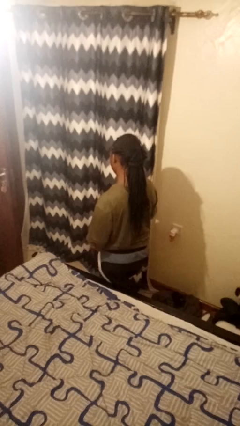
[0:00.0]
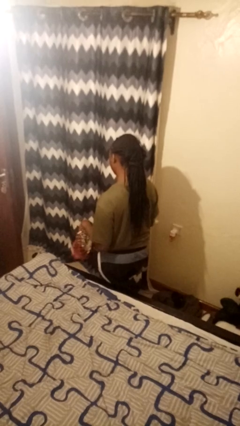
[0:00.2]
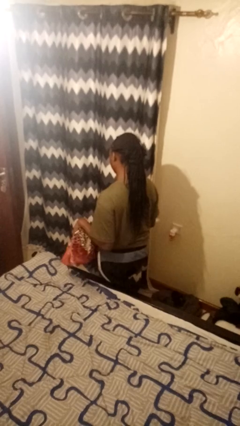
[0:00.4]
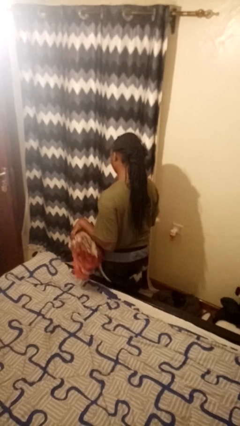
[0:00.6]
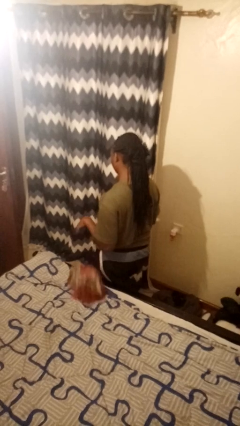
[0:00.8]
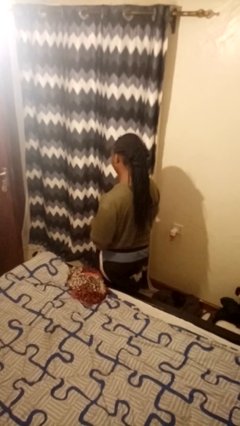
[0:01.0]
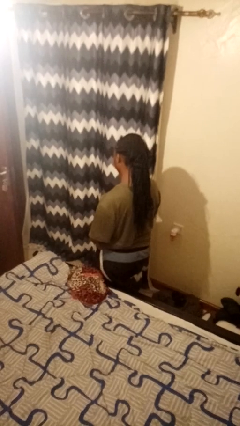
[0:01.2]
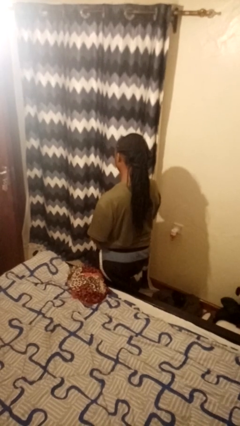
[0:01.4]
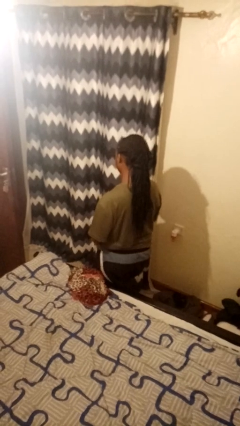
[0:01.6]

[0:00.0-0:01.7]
person throws object on bed

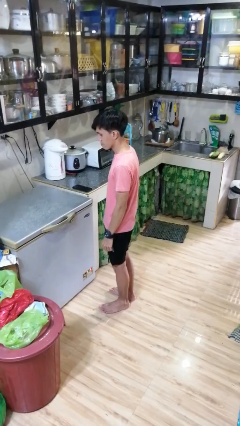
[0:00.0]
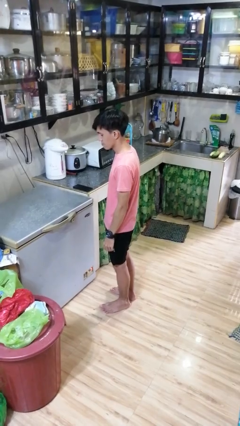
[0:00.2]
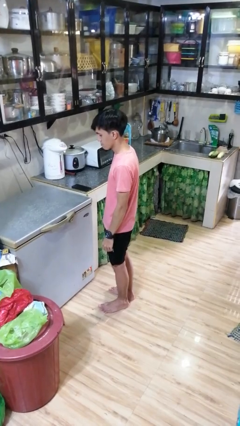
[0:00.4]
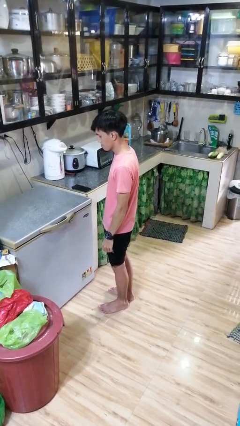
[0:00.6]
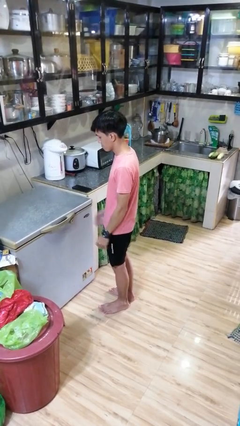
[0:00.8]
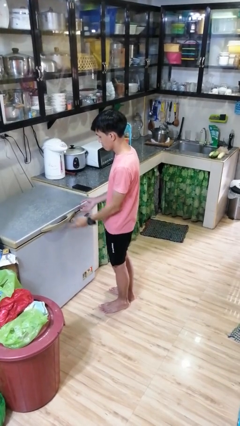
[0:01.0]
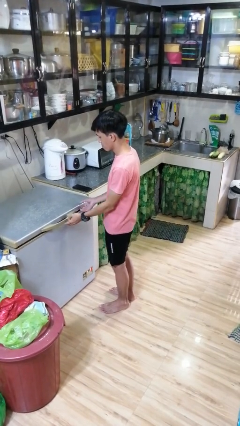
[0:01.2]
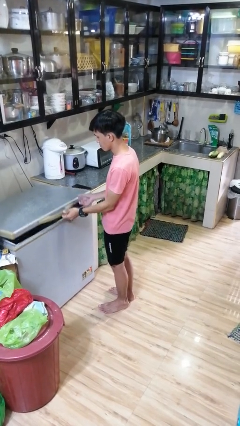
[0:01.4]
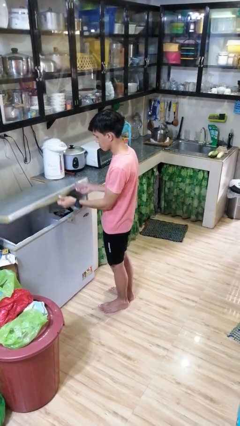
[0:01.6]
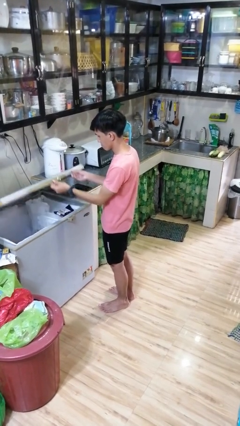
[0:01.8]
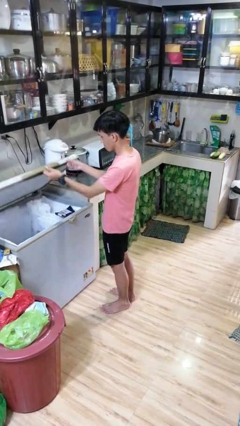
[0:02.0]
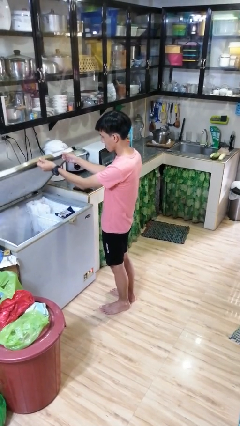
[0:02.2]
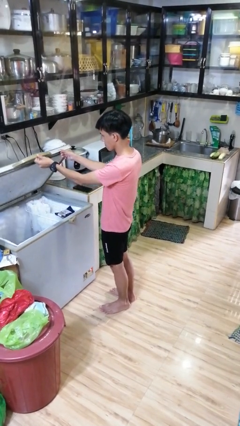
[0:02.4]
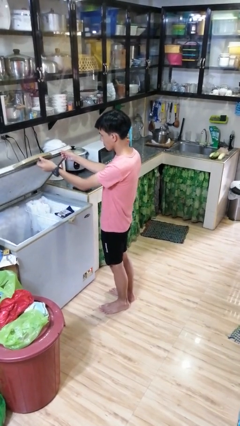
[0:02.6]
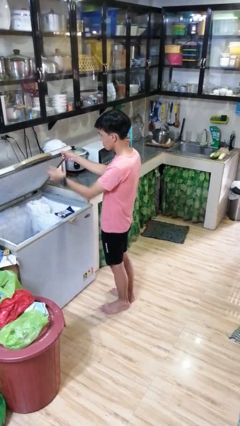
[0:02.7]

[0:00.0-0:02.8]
person opens refrigerator

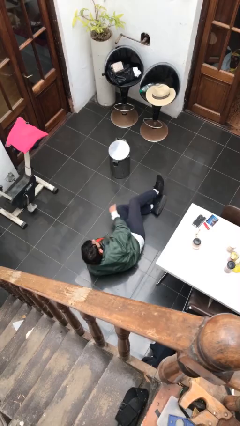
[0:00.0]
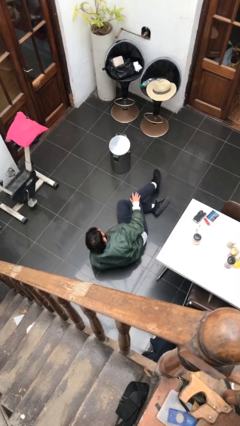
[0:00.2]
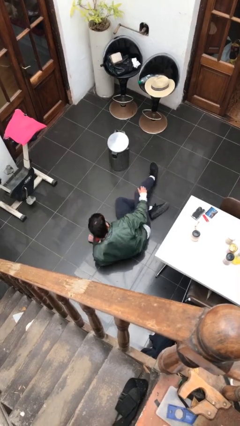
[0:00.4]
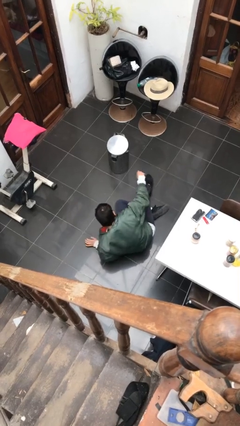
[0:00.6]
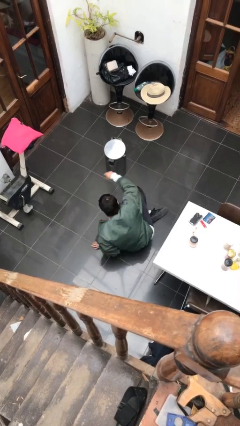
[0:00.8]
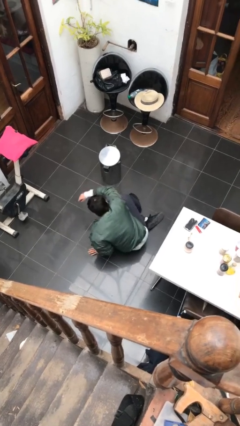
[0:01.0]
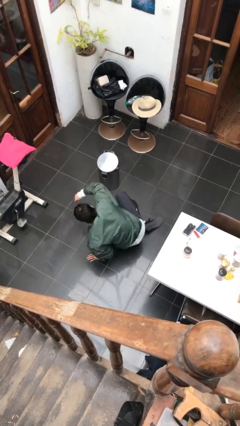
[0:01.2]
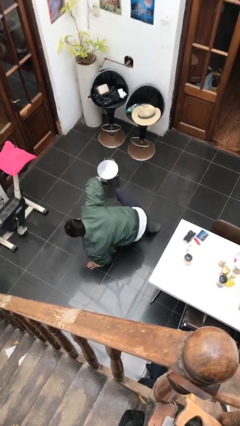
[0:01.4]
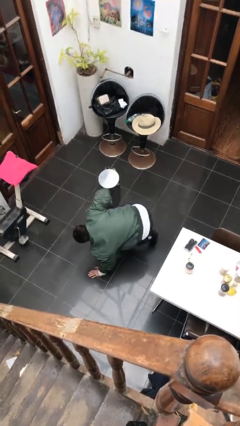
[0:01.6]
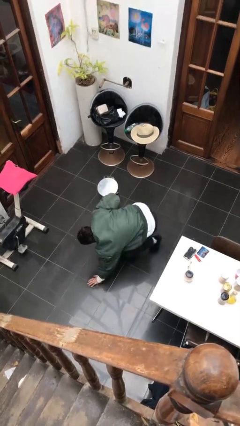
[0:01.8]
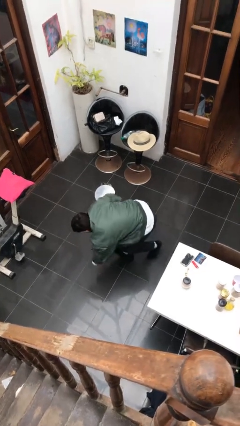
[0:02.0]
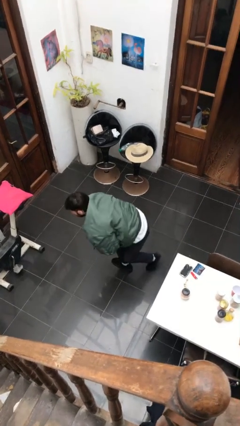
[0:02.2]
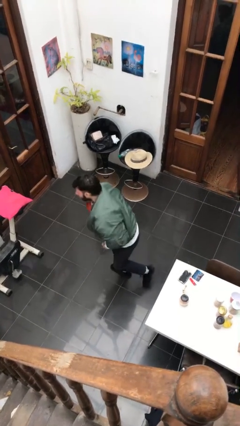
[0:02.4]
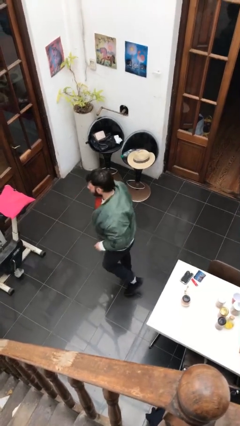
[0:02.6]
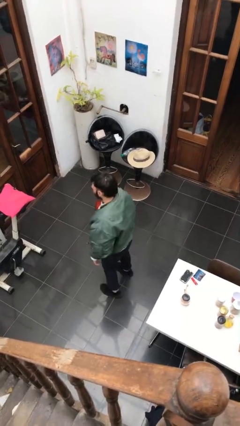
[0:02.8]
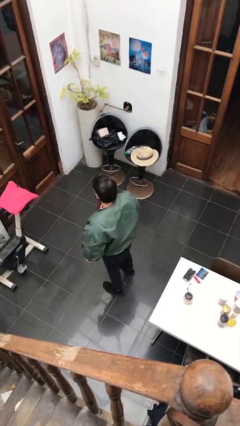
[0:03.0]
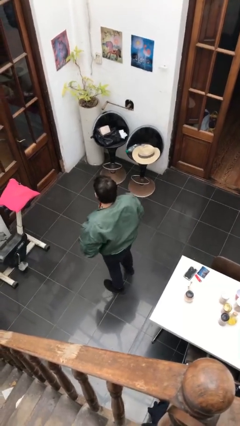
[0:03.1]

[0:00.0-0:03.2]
person stands up from floor

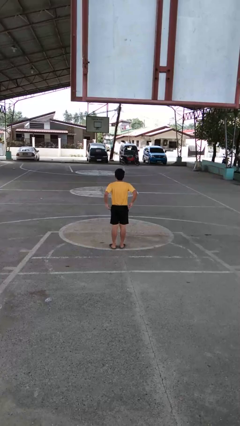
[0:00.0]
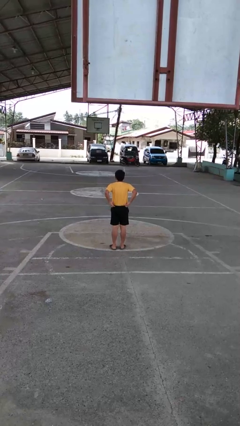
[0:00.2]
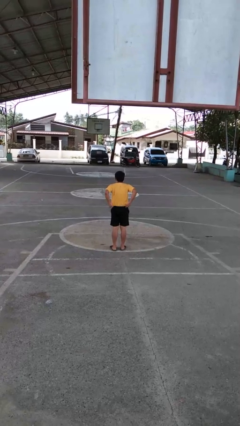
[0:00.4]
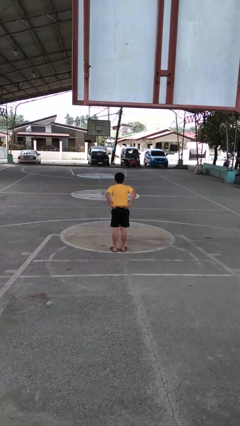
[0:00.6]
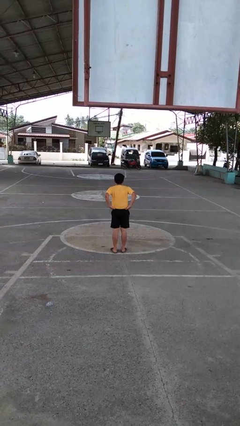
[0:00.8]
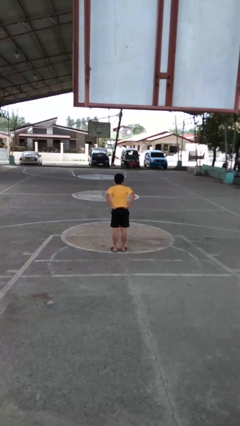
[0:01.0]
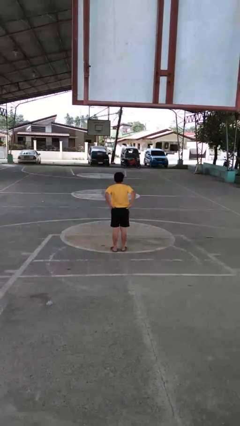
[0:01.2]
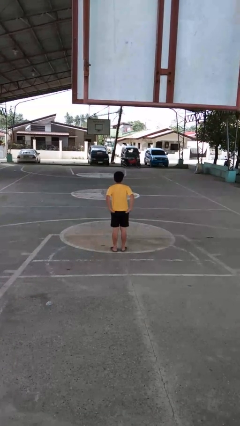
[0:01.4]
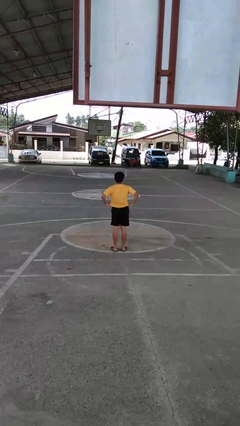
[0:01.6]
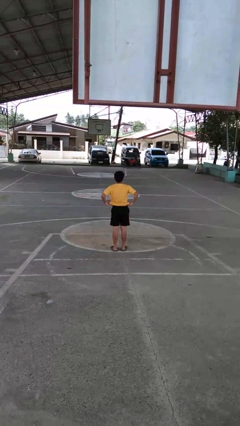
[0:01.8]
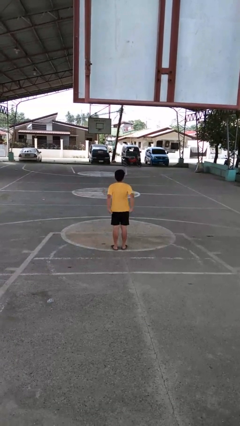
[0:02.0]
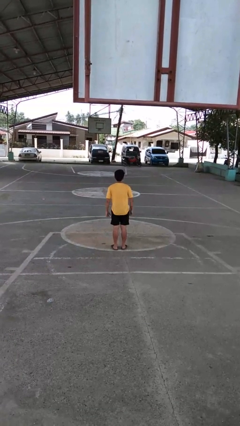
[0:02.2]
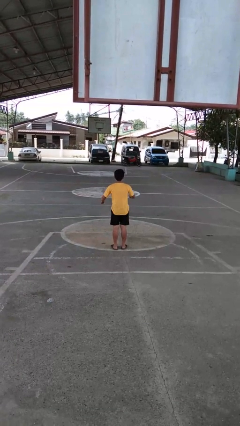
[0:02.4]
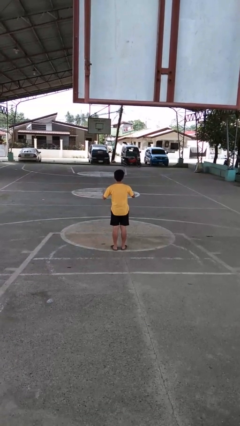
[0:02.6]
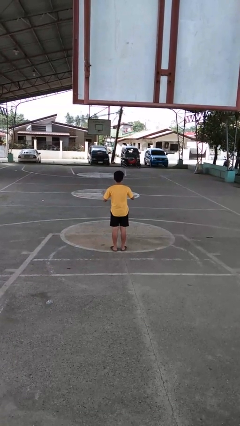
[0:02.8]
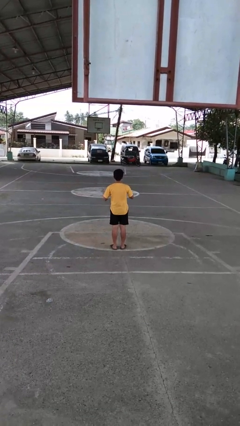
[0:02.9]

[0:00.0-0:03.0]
person untucks shirt

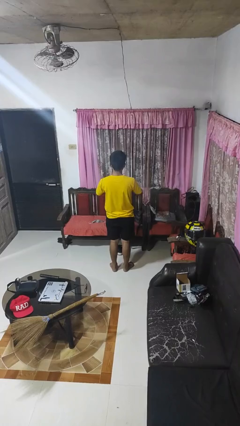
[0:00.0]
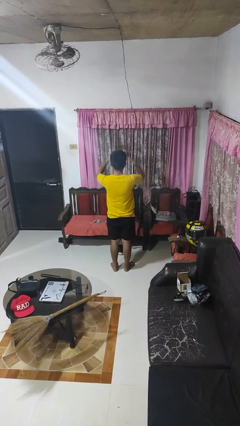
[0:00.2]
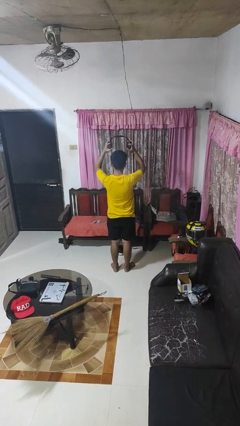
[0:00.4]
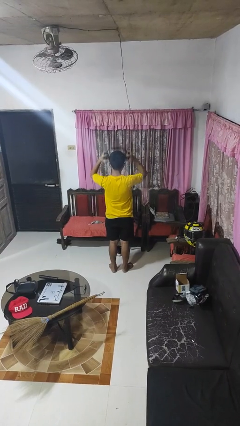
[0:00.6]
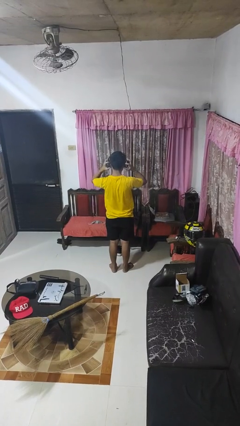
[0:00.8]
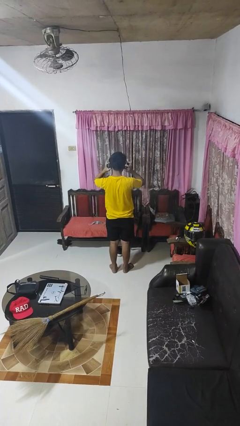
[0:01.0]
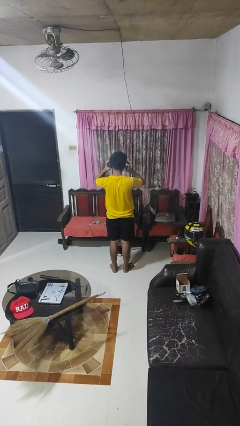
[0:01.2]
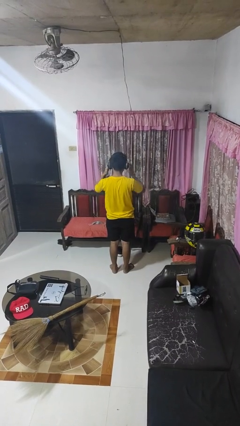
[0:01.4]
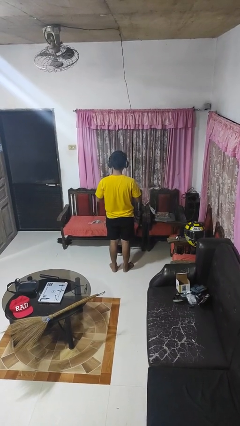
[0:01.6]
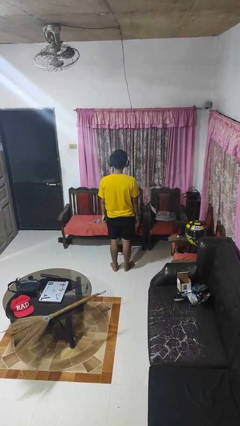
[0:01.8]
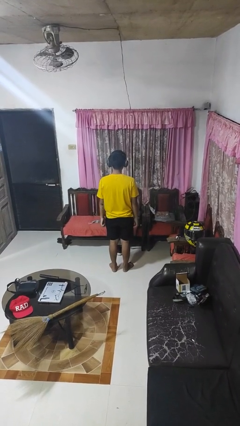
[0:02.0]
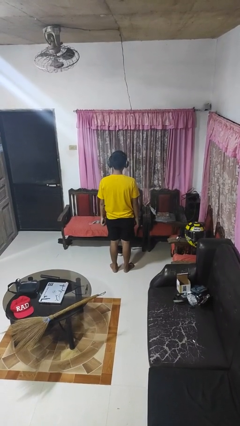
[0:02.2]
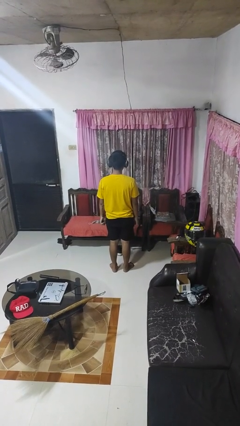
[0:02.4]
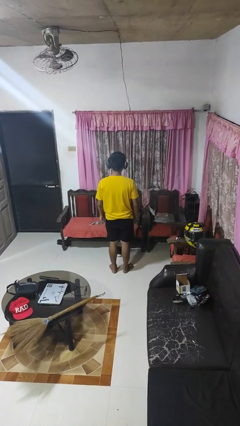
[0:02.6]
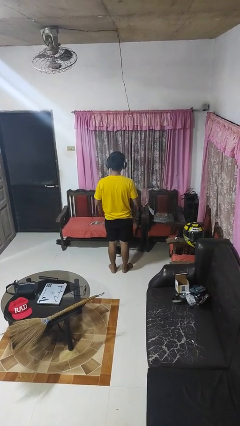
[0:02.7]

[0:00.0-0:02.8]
person puts on headphones

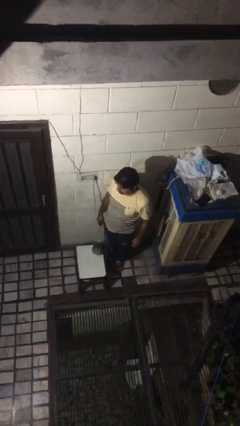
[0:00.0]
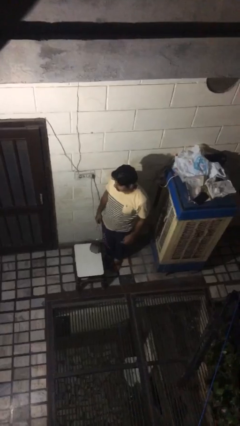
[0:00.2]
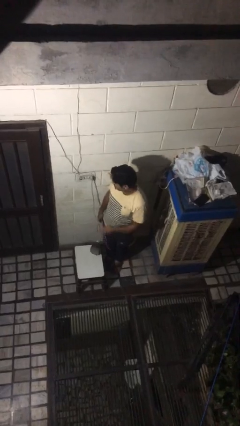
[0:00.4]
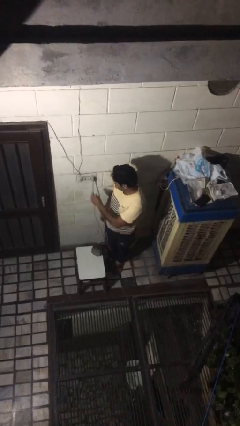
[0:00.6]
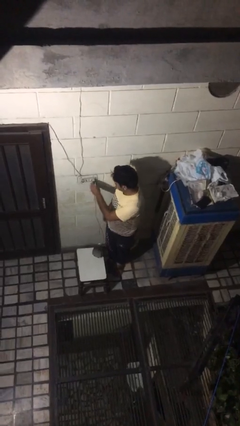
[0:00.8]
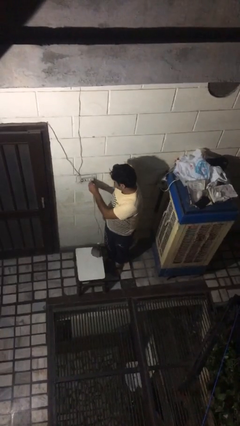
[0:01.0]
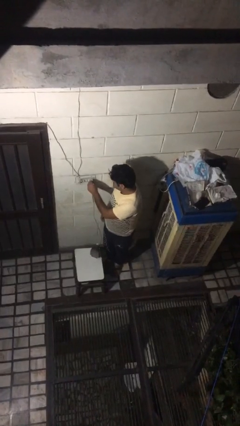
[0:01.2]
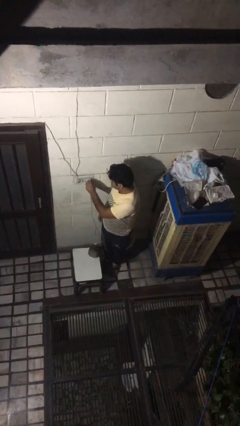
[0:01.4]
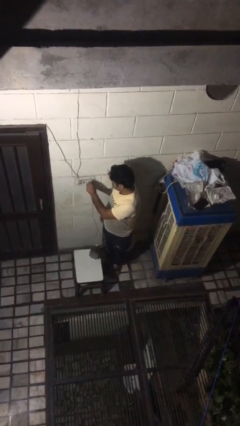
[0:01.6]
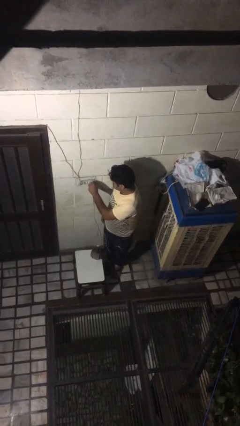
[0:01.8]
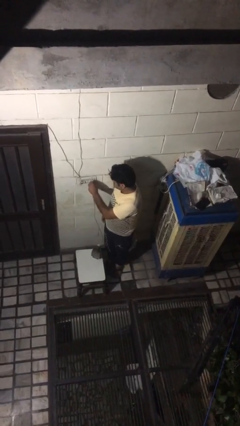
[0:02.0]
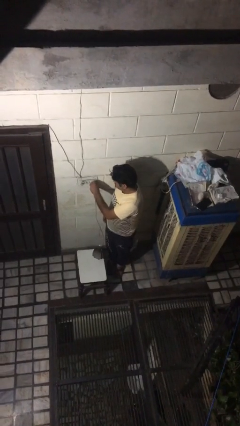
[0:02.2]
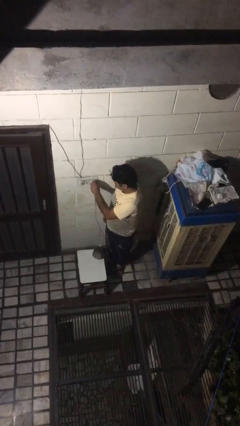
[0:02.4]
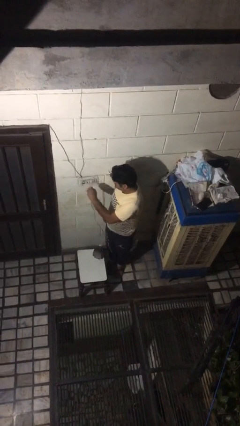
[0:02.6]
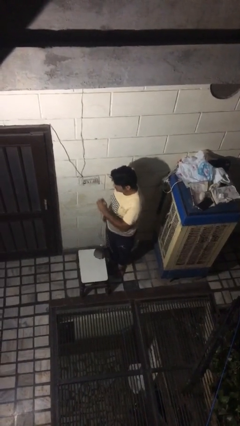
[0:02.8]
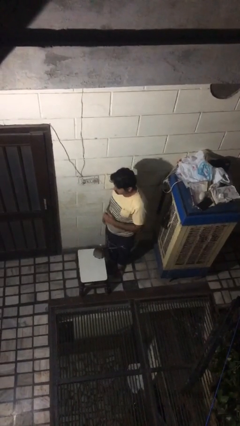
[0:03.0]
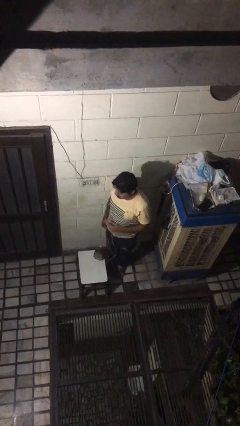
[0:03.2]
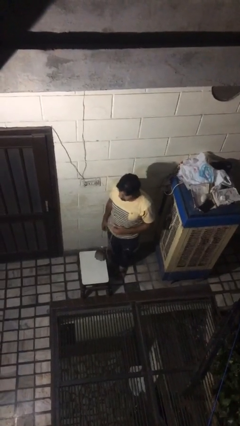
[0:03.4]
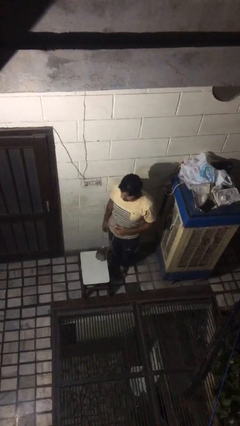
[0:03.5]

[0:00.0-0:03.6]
person unplugs from electrical socket

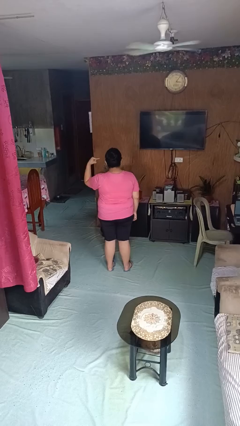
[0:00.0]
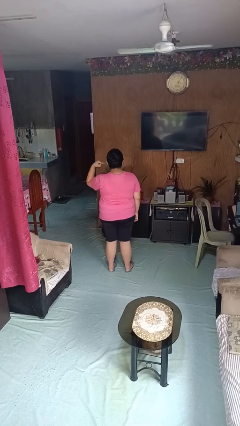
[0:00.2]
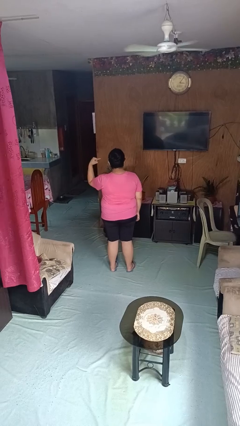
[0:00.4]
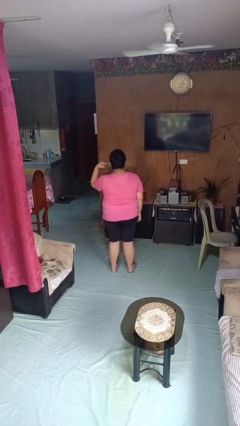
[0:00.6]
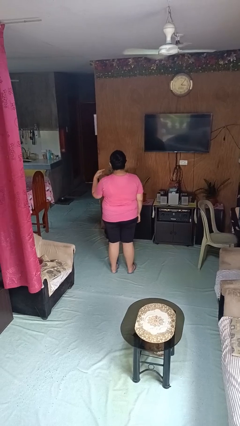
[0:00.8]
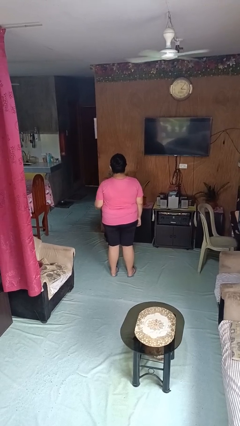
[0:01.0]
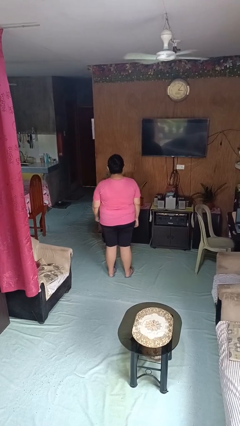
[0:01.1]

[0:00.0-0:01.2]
person gestures listen closely
